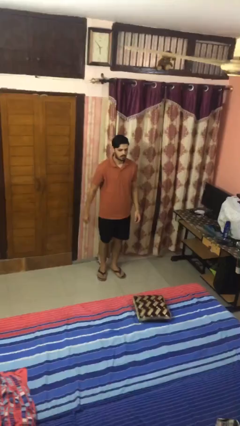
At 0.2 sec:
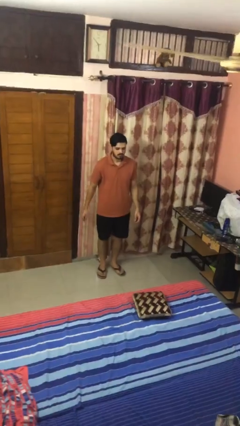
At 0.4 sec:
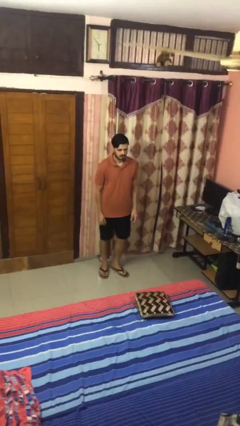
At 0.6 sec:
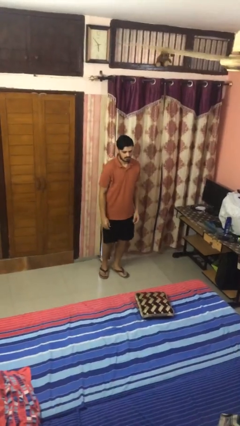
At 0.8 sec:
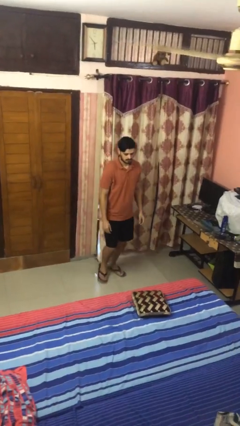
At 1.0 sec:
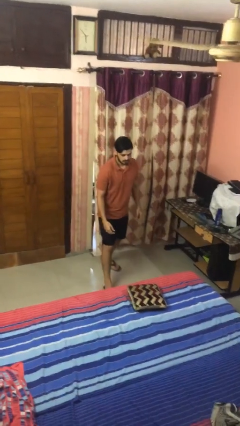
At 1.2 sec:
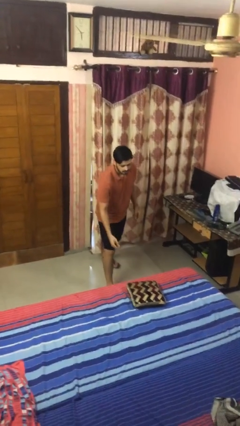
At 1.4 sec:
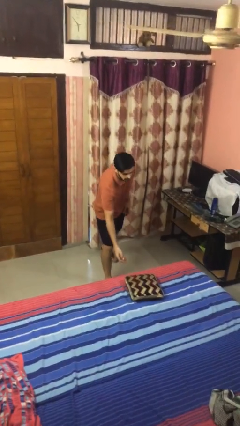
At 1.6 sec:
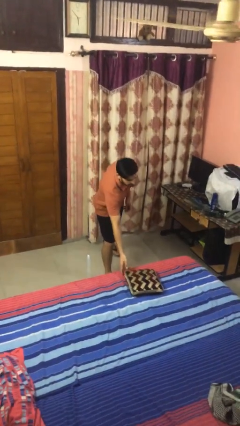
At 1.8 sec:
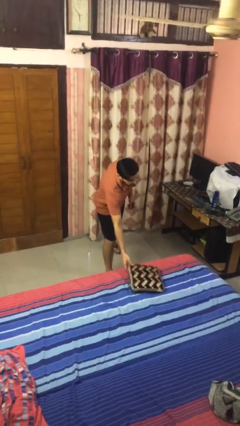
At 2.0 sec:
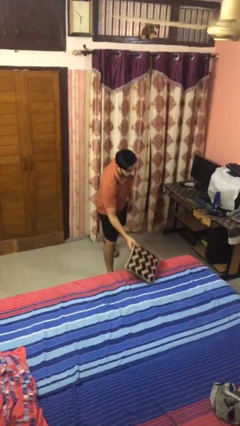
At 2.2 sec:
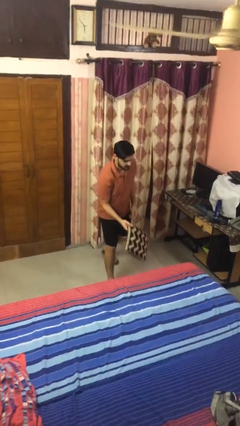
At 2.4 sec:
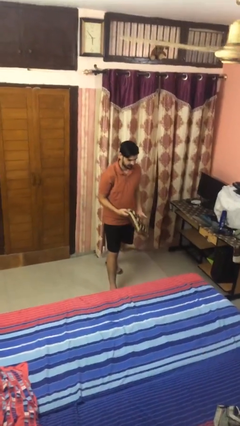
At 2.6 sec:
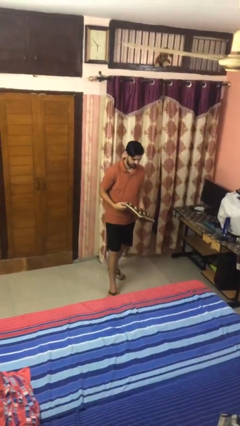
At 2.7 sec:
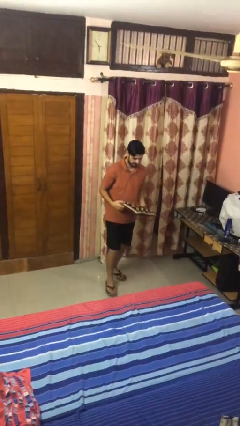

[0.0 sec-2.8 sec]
person picks up object from bed

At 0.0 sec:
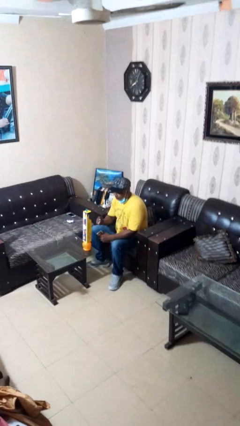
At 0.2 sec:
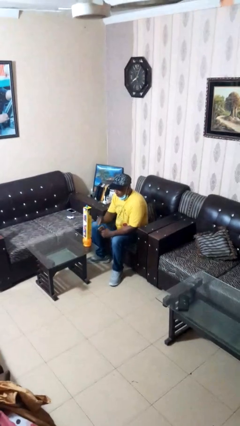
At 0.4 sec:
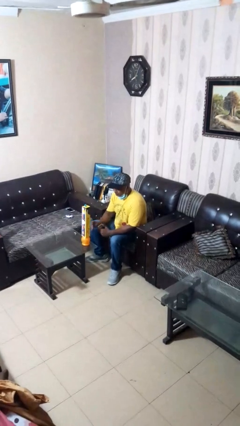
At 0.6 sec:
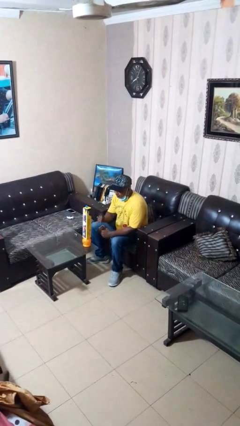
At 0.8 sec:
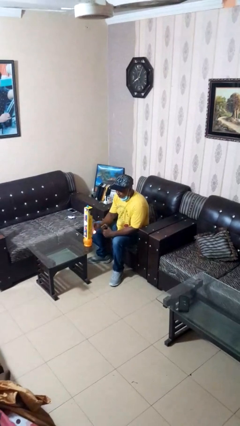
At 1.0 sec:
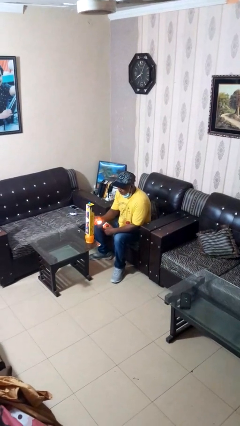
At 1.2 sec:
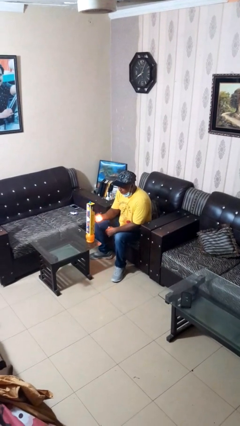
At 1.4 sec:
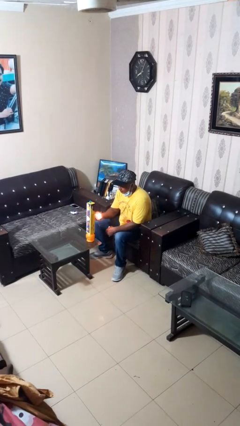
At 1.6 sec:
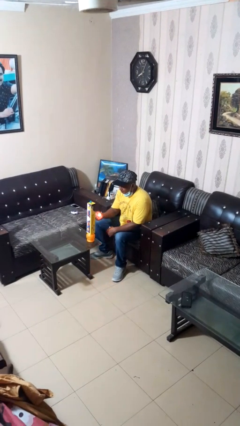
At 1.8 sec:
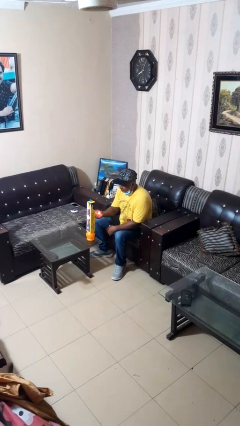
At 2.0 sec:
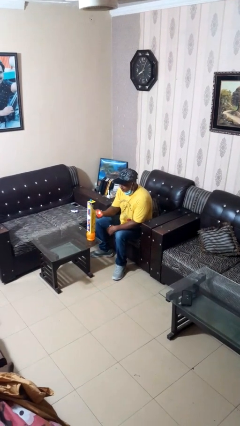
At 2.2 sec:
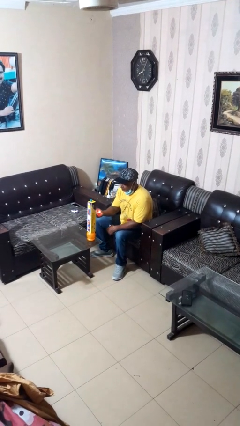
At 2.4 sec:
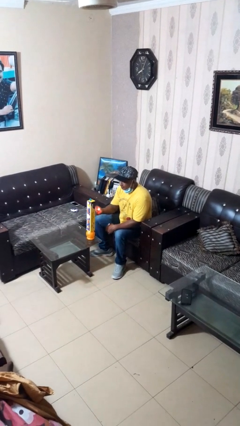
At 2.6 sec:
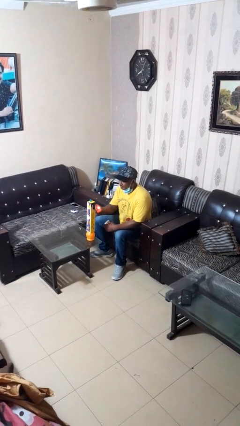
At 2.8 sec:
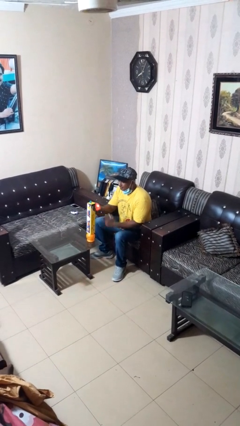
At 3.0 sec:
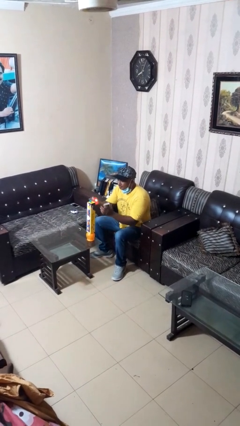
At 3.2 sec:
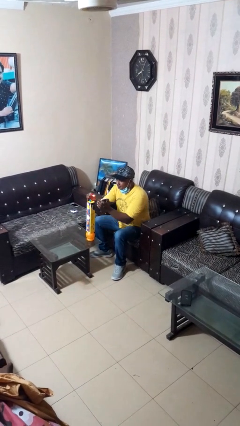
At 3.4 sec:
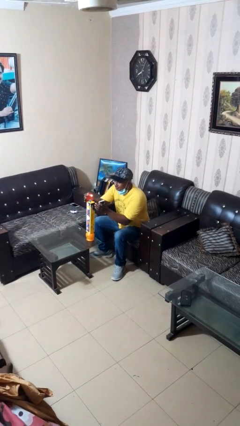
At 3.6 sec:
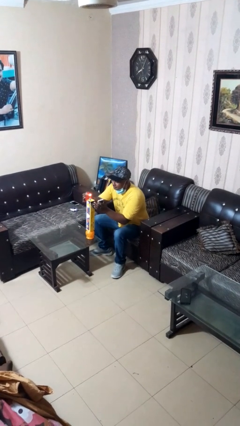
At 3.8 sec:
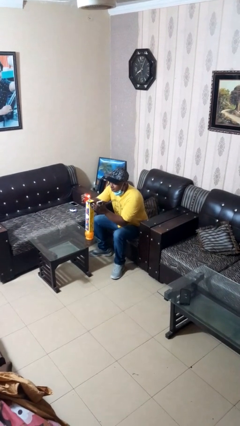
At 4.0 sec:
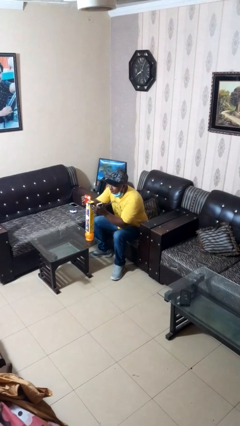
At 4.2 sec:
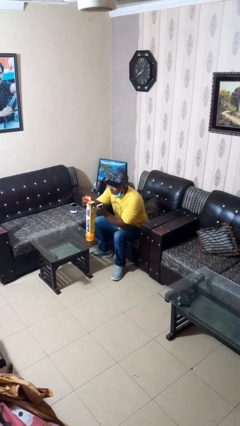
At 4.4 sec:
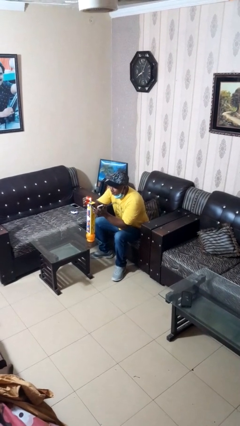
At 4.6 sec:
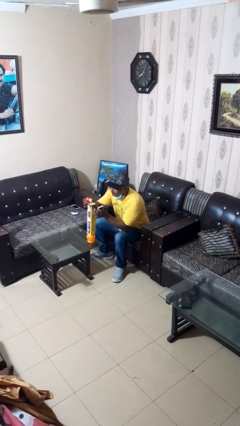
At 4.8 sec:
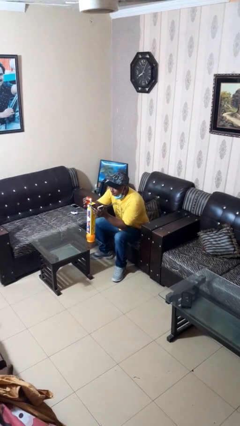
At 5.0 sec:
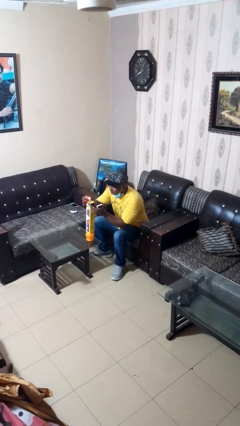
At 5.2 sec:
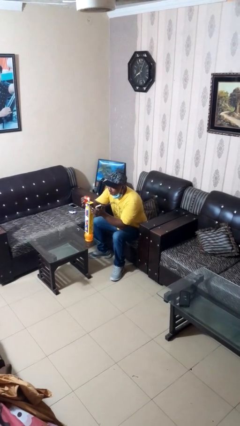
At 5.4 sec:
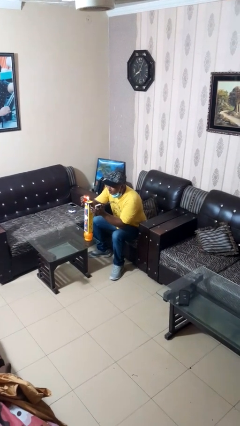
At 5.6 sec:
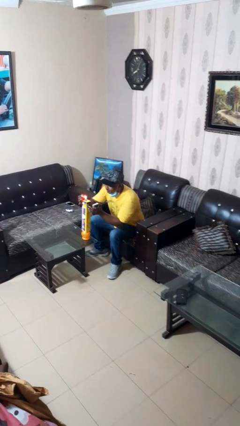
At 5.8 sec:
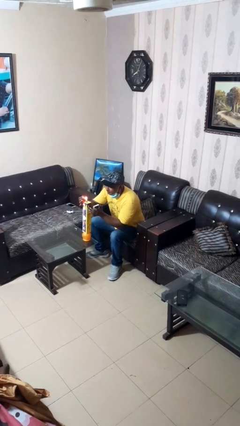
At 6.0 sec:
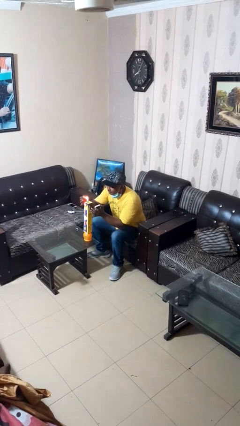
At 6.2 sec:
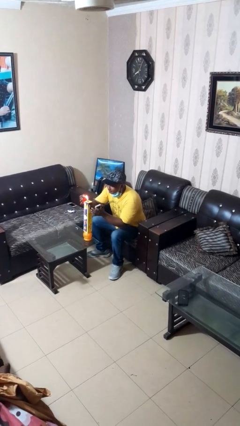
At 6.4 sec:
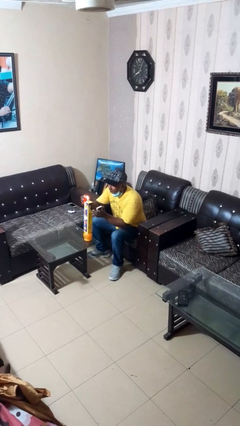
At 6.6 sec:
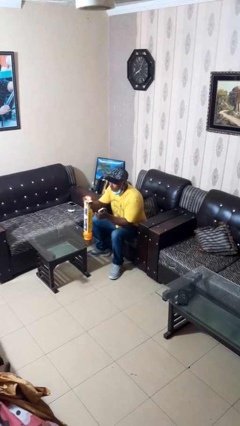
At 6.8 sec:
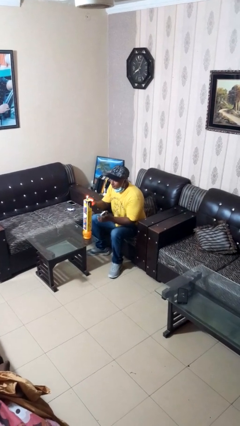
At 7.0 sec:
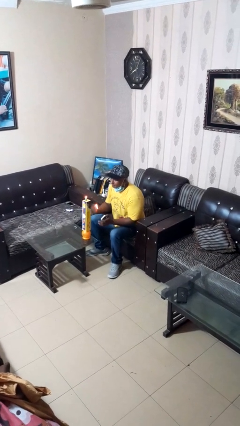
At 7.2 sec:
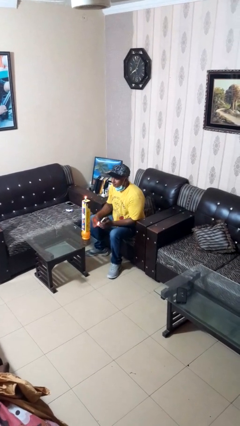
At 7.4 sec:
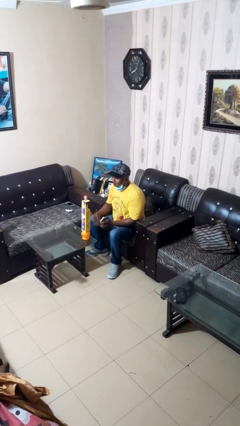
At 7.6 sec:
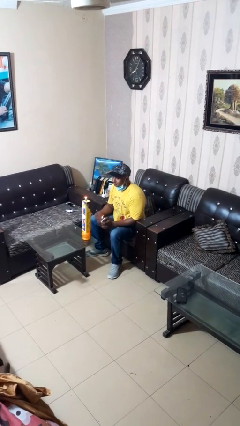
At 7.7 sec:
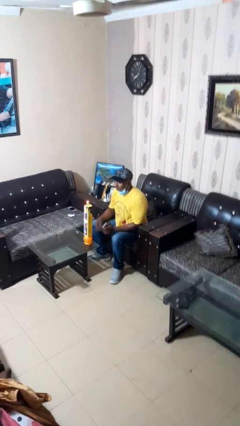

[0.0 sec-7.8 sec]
person lights candle

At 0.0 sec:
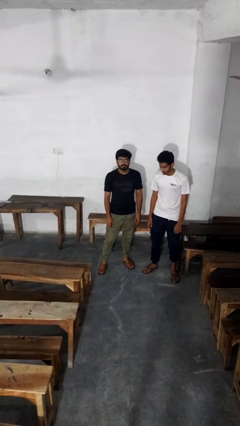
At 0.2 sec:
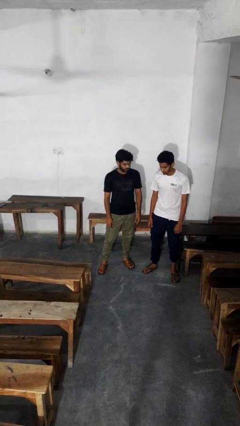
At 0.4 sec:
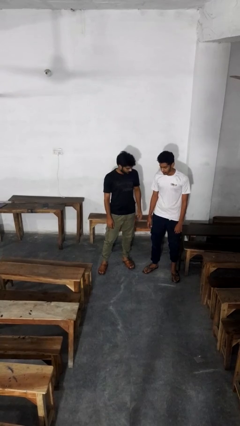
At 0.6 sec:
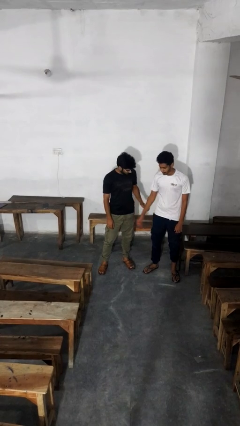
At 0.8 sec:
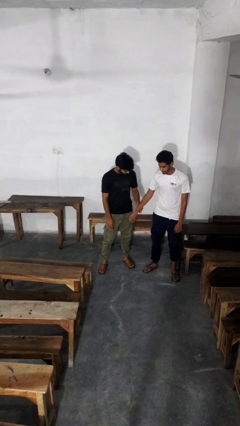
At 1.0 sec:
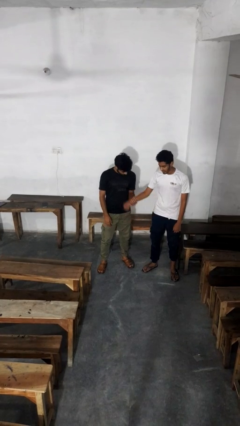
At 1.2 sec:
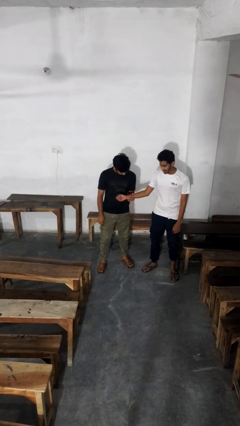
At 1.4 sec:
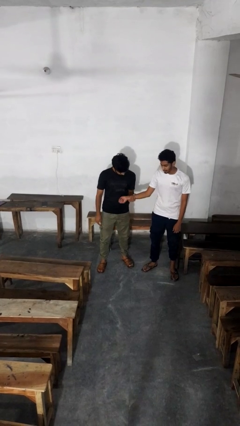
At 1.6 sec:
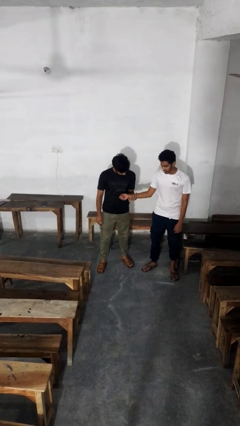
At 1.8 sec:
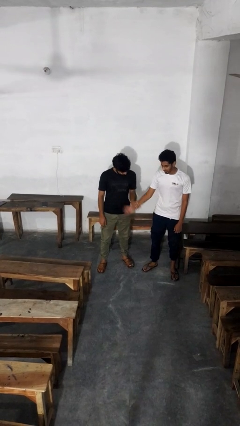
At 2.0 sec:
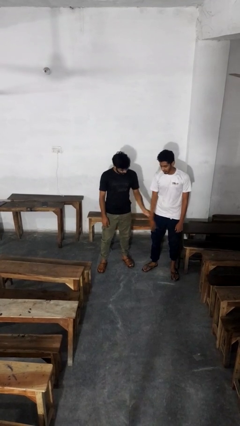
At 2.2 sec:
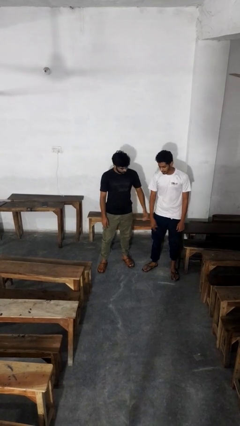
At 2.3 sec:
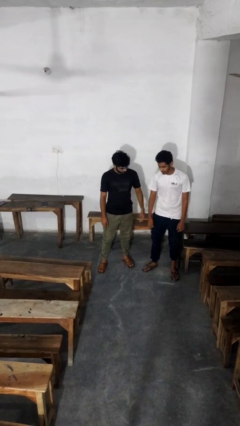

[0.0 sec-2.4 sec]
person grabs person by forearm

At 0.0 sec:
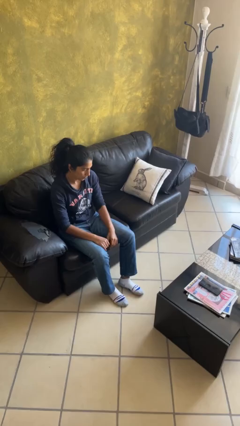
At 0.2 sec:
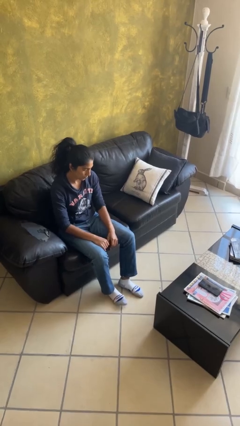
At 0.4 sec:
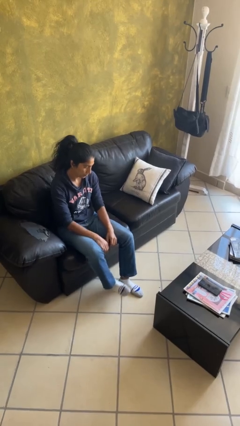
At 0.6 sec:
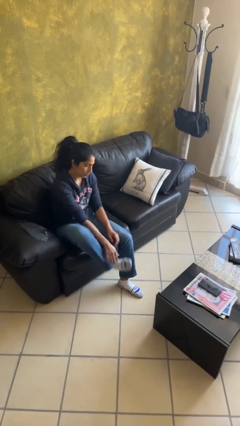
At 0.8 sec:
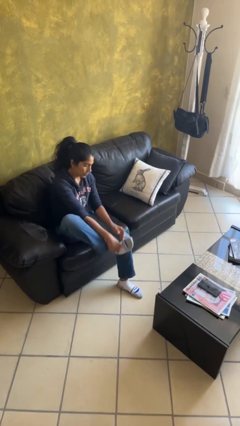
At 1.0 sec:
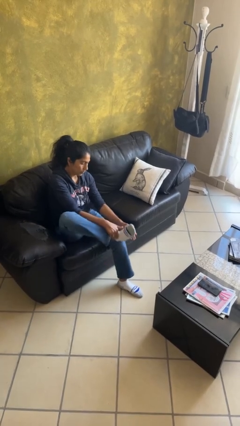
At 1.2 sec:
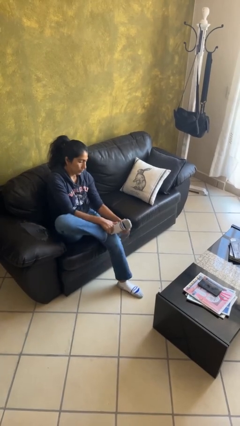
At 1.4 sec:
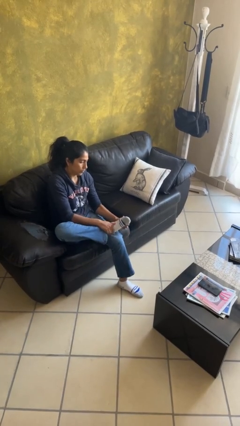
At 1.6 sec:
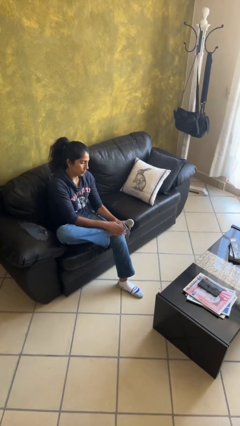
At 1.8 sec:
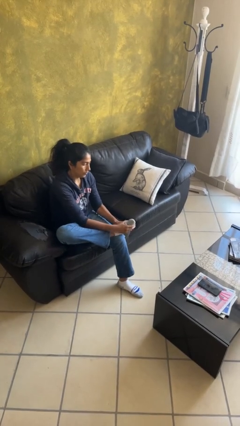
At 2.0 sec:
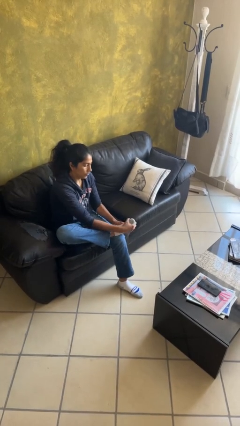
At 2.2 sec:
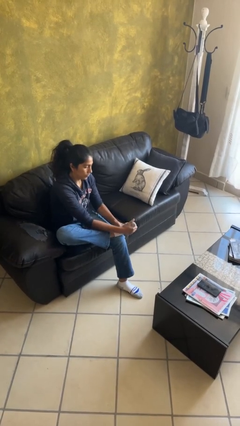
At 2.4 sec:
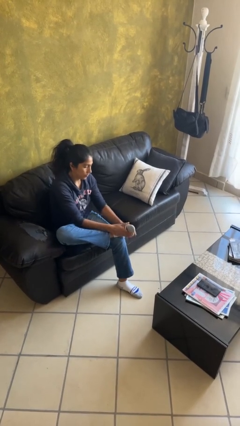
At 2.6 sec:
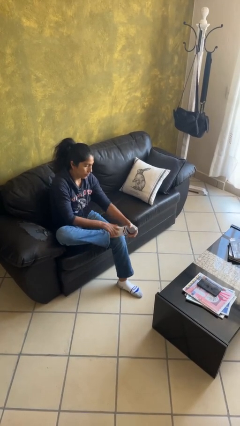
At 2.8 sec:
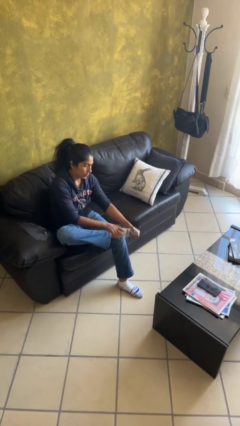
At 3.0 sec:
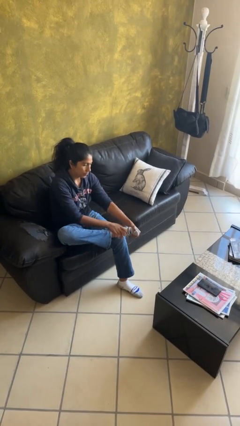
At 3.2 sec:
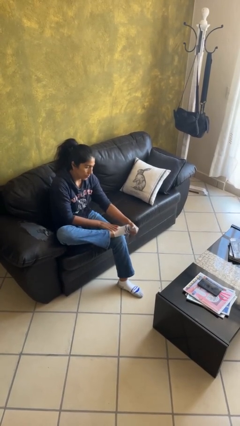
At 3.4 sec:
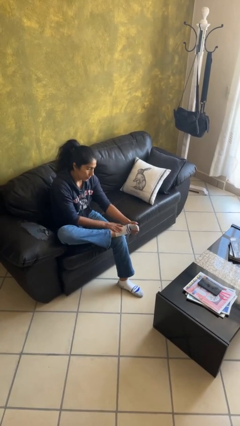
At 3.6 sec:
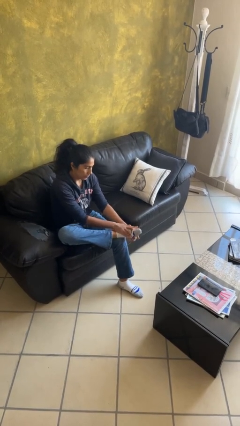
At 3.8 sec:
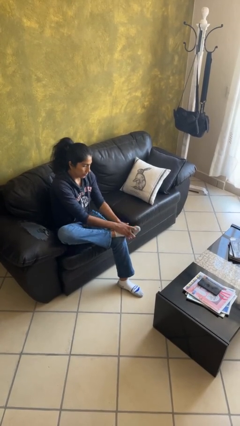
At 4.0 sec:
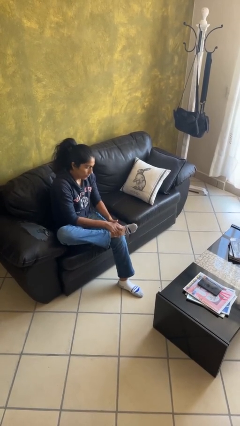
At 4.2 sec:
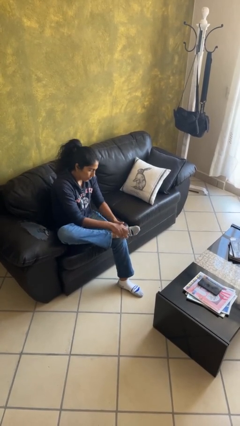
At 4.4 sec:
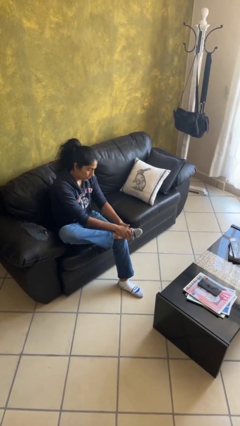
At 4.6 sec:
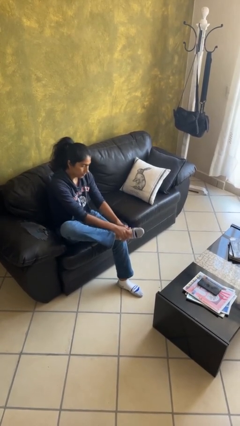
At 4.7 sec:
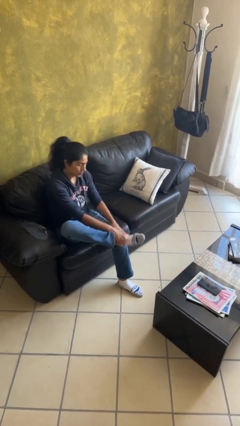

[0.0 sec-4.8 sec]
person rubs foot

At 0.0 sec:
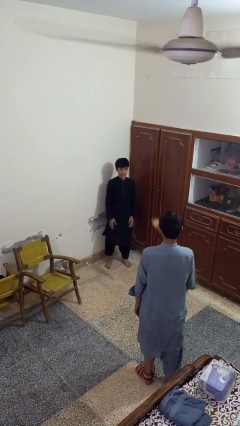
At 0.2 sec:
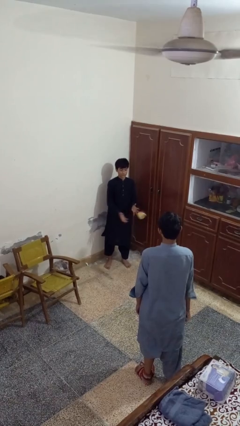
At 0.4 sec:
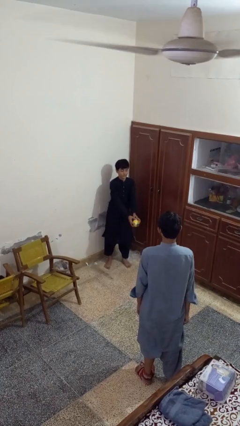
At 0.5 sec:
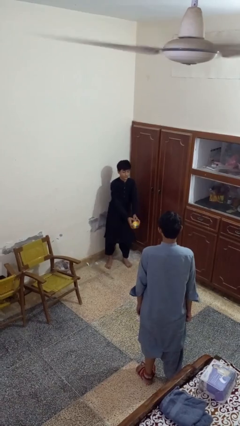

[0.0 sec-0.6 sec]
person catches object from person
